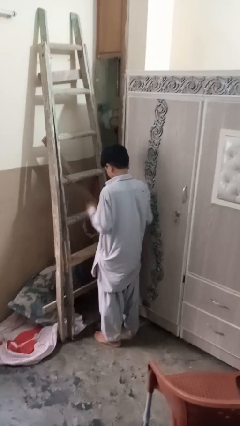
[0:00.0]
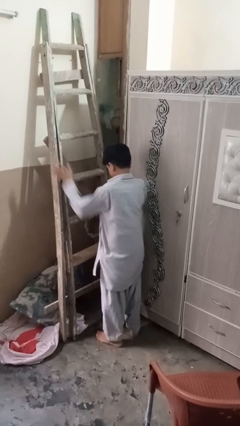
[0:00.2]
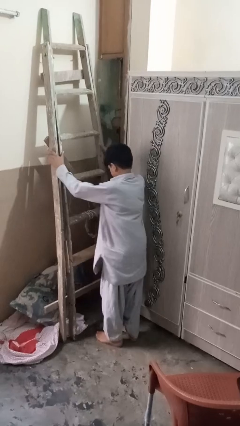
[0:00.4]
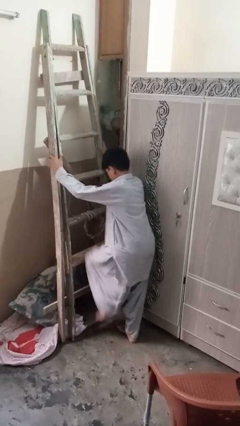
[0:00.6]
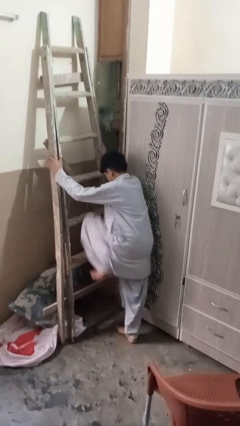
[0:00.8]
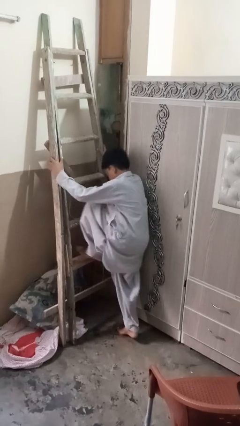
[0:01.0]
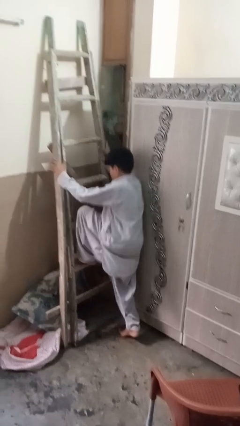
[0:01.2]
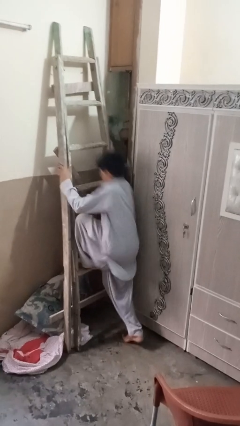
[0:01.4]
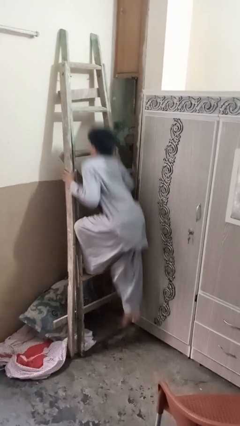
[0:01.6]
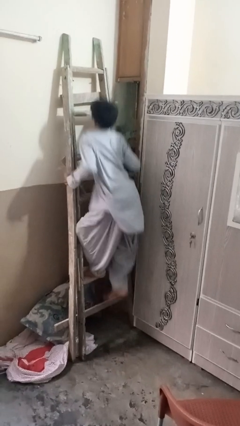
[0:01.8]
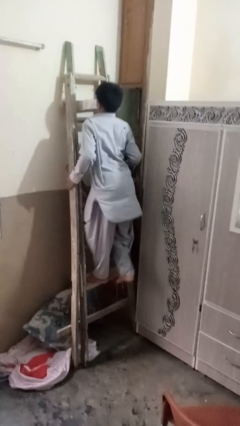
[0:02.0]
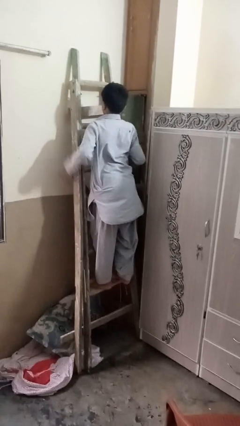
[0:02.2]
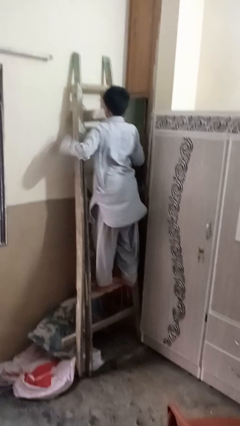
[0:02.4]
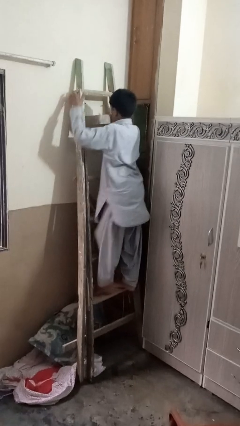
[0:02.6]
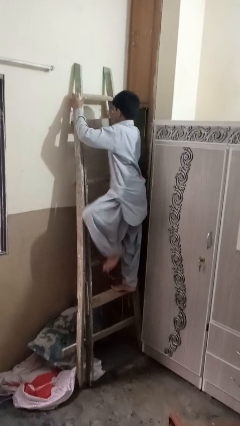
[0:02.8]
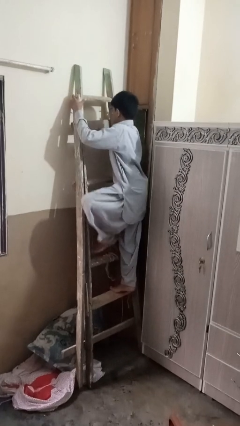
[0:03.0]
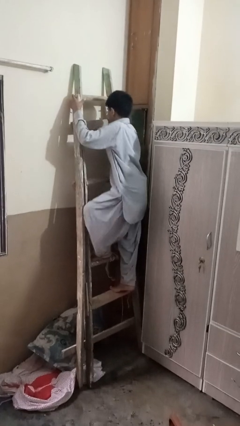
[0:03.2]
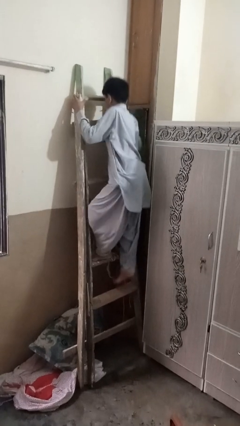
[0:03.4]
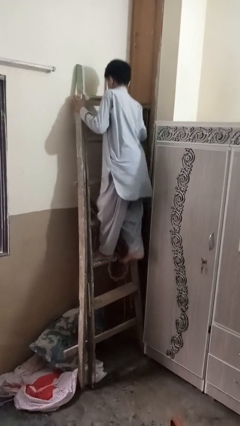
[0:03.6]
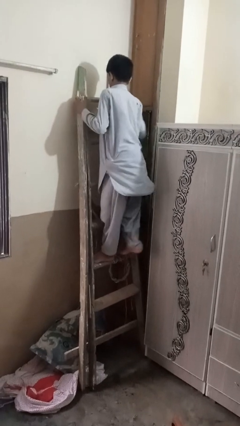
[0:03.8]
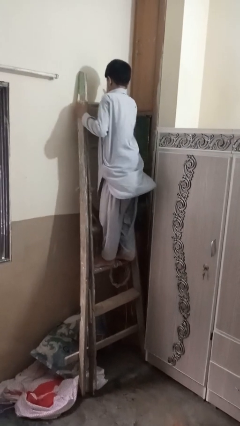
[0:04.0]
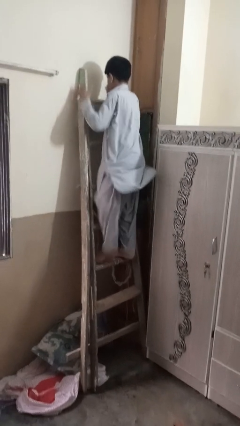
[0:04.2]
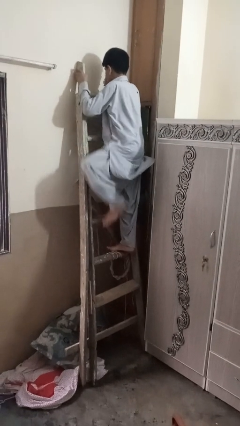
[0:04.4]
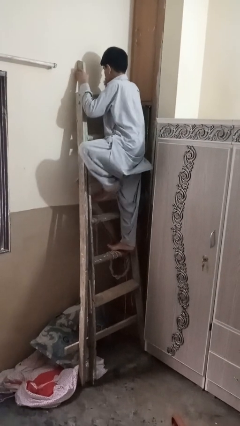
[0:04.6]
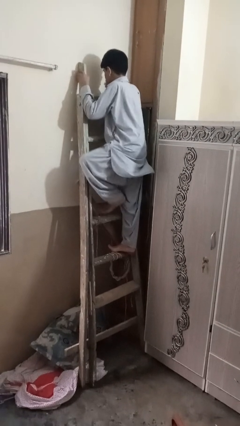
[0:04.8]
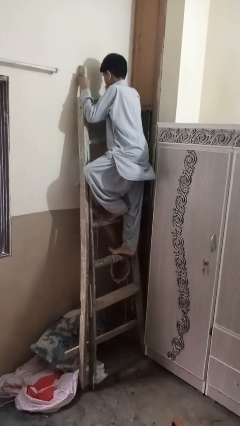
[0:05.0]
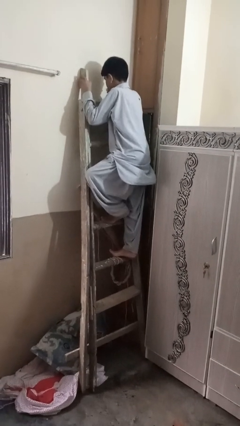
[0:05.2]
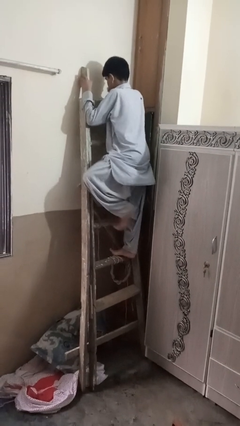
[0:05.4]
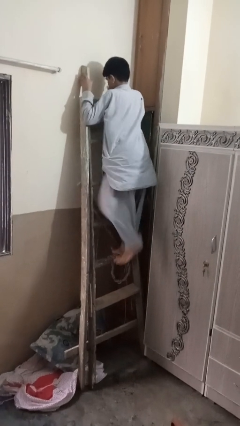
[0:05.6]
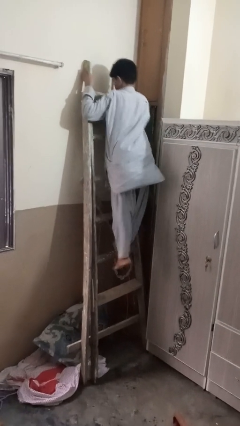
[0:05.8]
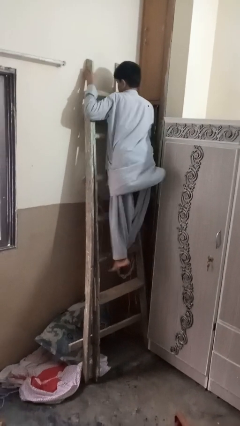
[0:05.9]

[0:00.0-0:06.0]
person climbs up ladder

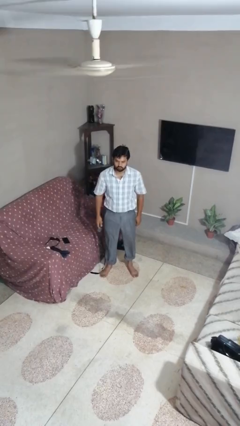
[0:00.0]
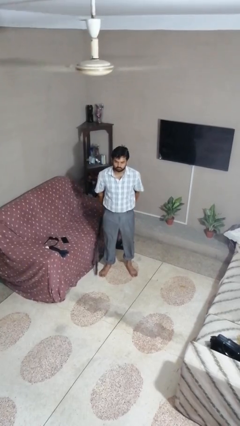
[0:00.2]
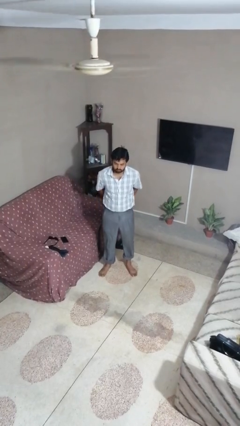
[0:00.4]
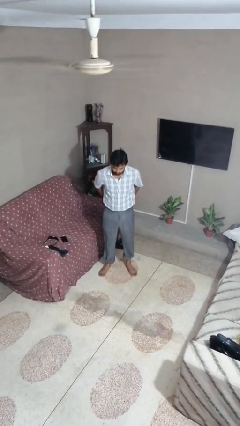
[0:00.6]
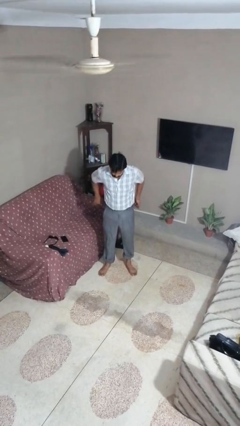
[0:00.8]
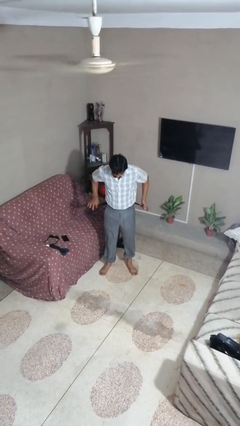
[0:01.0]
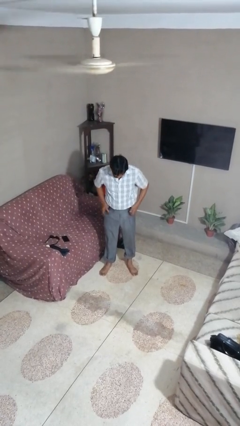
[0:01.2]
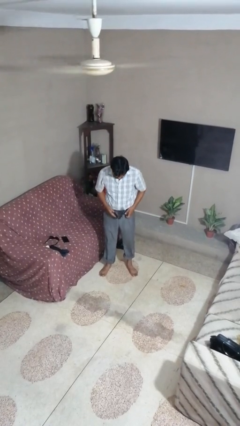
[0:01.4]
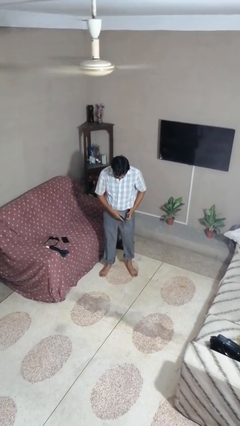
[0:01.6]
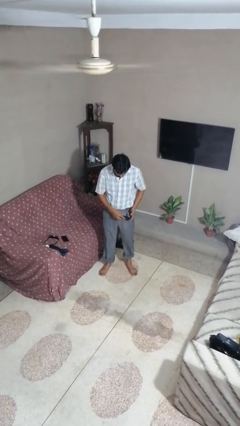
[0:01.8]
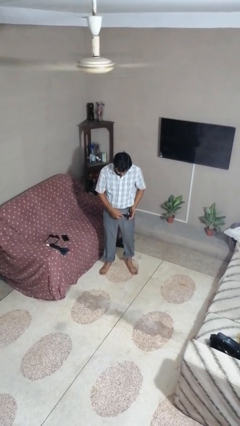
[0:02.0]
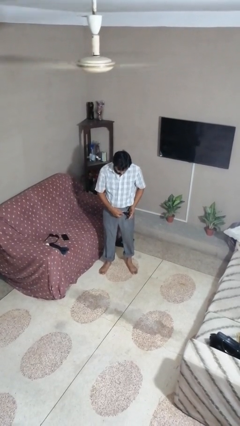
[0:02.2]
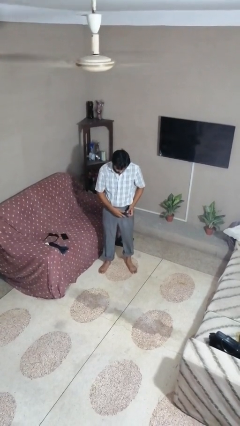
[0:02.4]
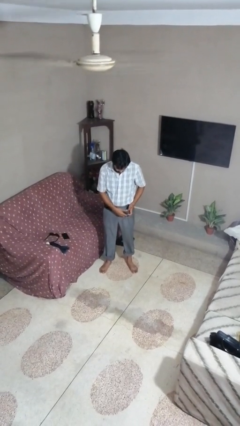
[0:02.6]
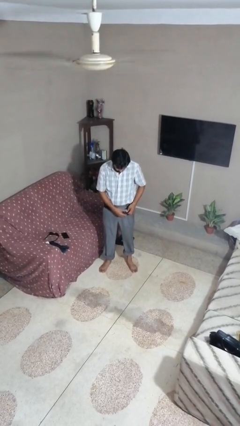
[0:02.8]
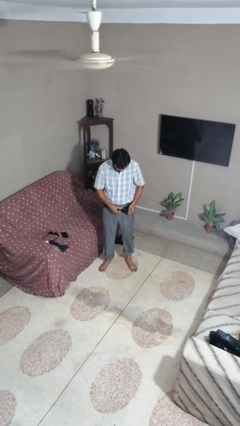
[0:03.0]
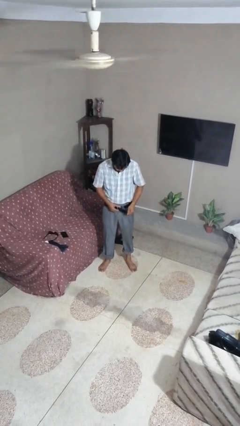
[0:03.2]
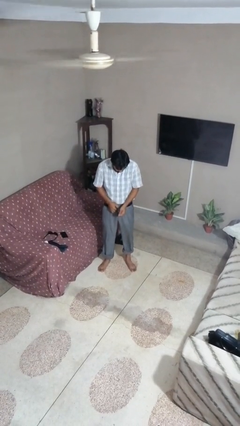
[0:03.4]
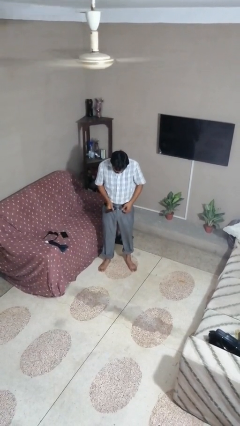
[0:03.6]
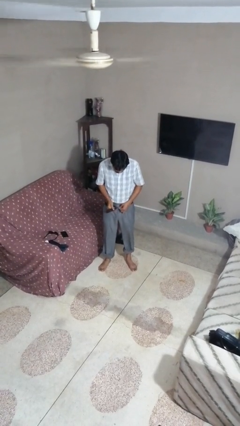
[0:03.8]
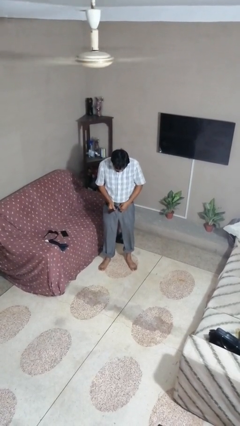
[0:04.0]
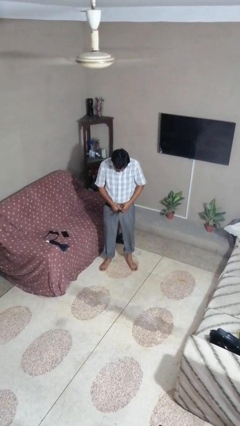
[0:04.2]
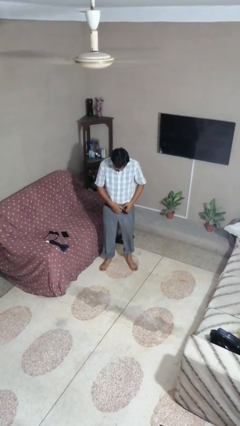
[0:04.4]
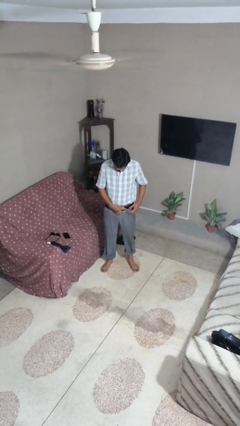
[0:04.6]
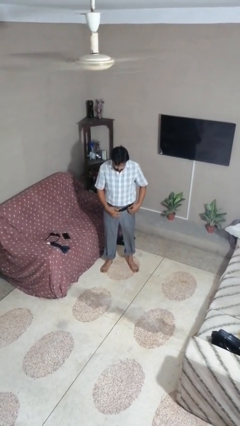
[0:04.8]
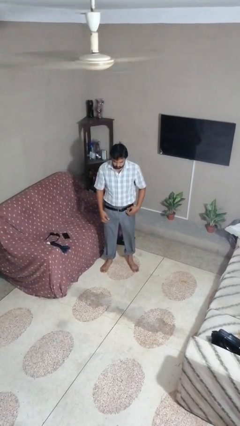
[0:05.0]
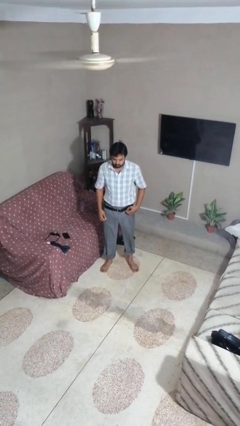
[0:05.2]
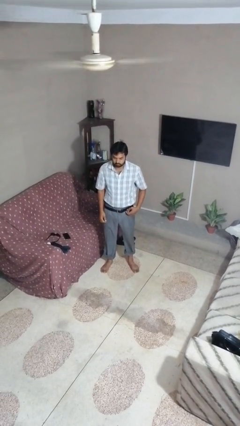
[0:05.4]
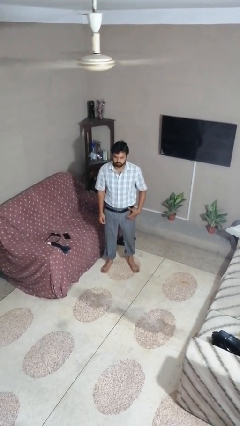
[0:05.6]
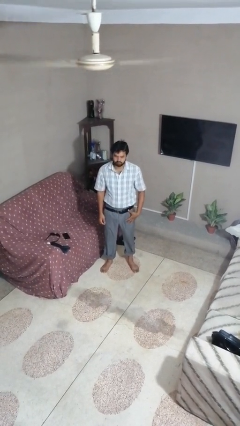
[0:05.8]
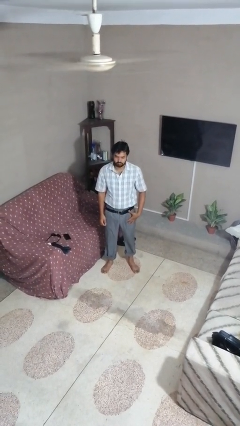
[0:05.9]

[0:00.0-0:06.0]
person puts on belt

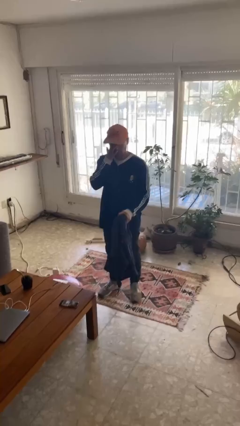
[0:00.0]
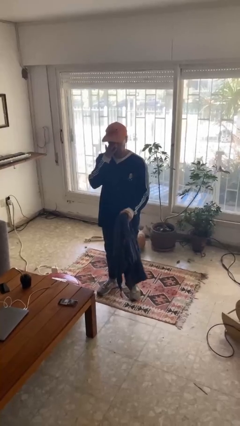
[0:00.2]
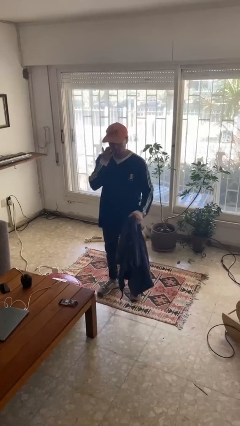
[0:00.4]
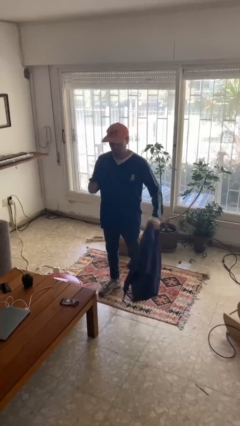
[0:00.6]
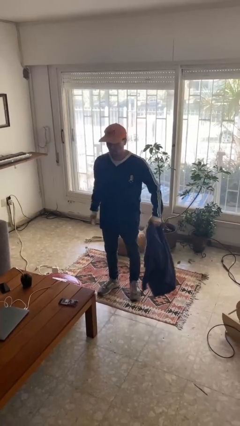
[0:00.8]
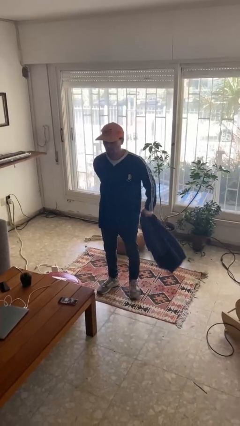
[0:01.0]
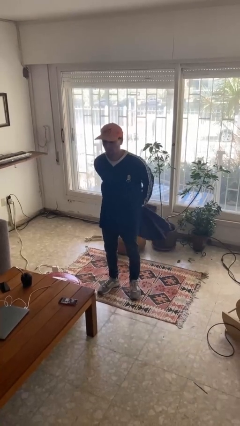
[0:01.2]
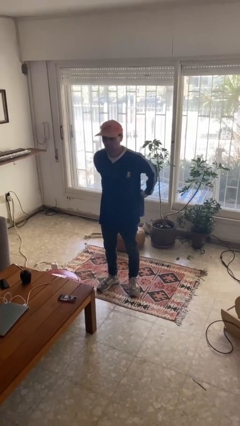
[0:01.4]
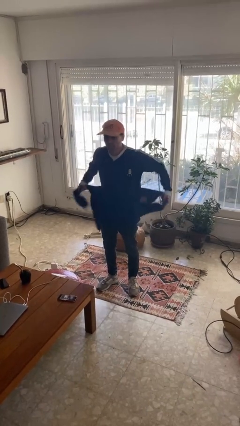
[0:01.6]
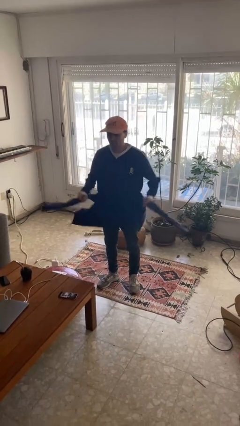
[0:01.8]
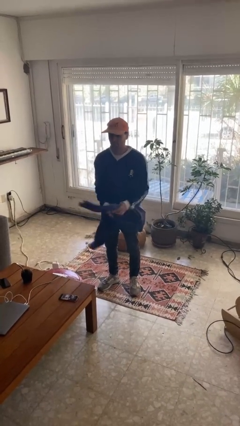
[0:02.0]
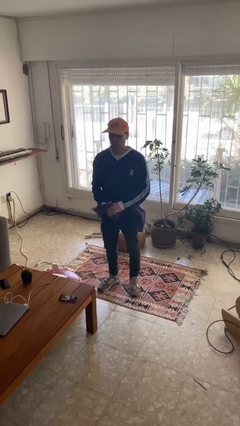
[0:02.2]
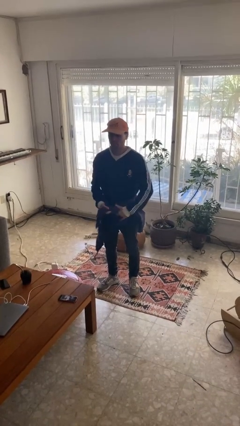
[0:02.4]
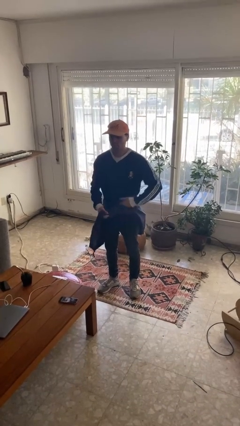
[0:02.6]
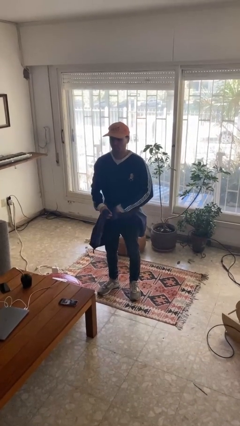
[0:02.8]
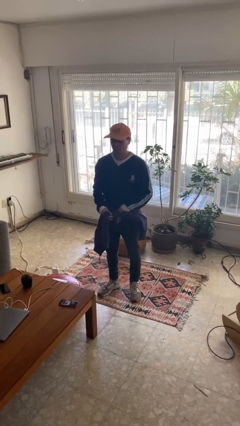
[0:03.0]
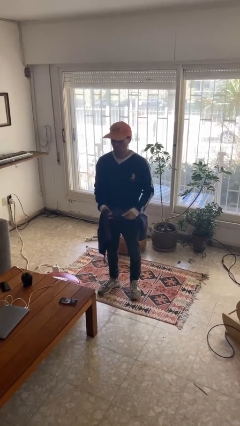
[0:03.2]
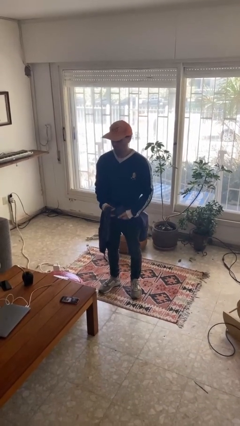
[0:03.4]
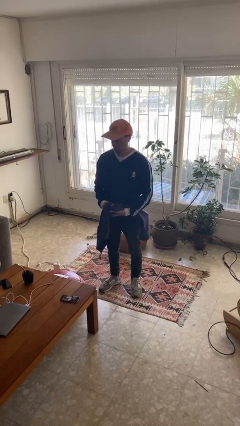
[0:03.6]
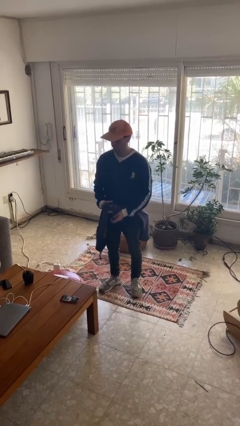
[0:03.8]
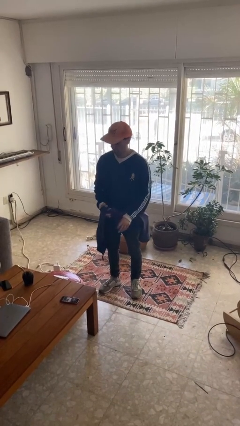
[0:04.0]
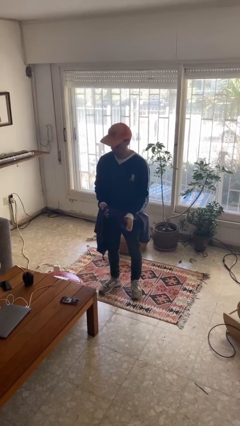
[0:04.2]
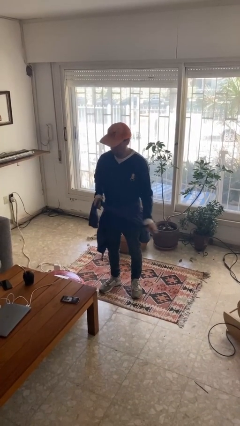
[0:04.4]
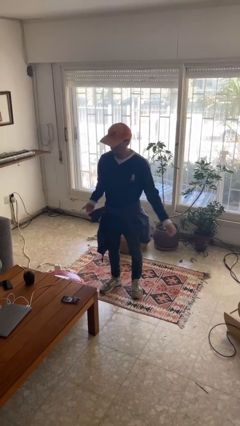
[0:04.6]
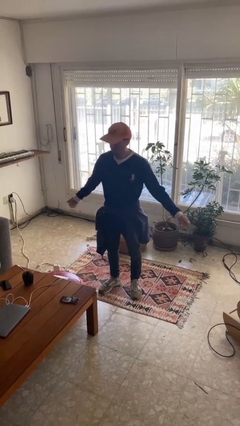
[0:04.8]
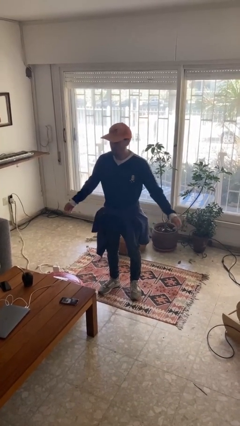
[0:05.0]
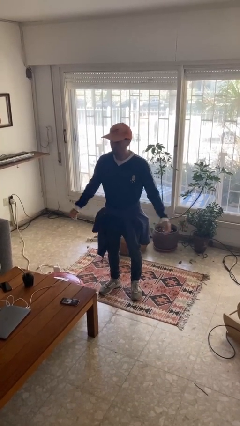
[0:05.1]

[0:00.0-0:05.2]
person ties jacket around waist

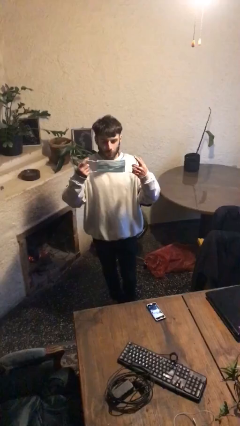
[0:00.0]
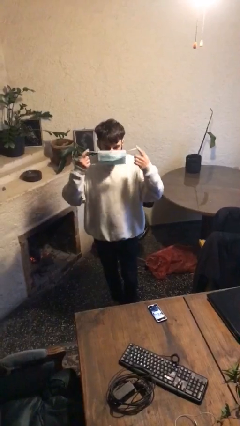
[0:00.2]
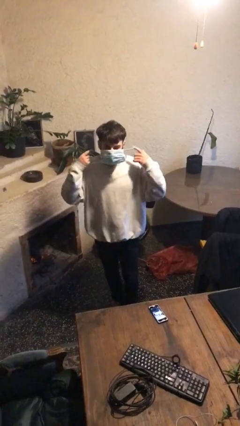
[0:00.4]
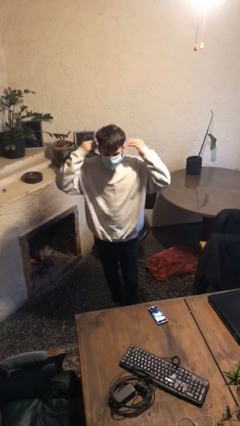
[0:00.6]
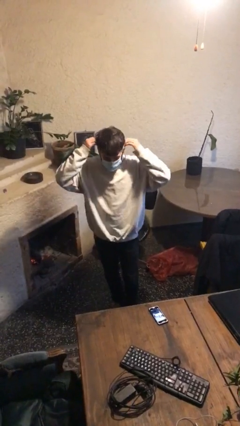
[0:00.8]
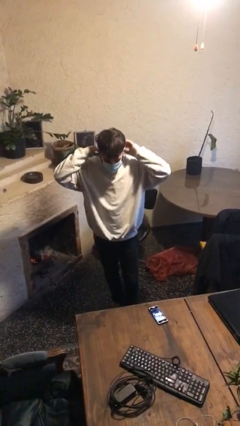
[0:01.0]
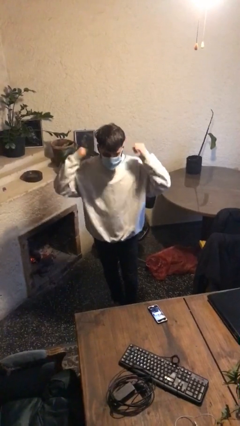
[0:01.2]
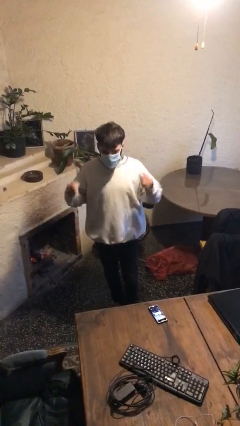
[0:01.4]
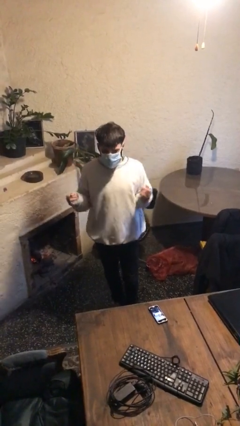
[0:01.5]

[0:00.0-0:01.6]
person puts on facemask
